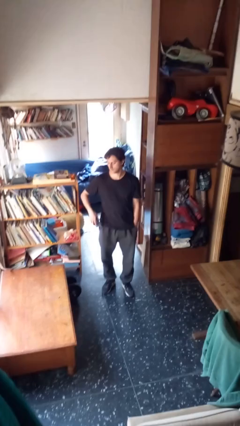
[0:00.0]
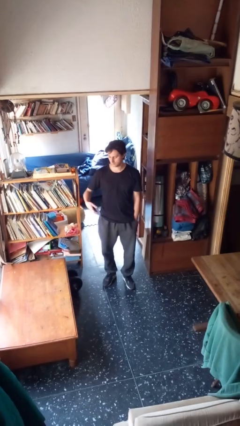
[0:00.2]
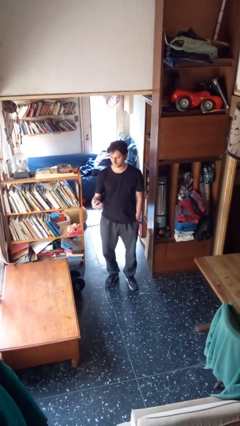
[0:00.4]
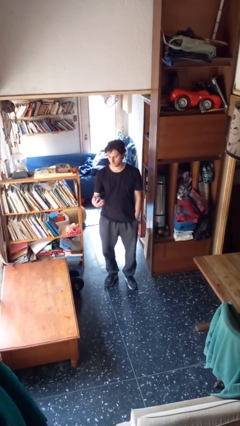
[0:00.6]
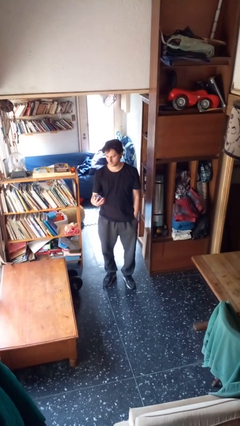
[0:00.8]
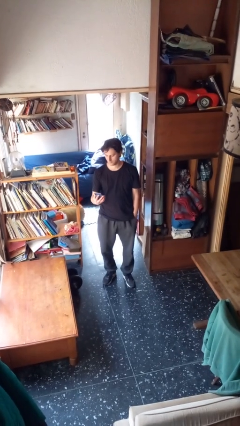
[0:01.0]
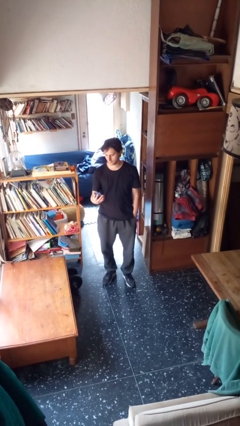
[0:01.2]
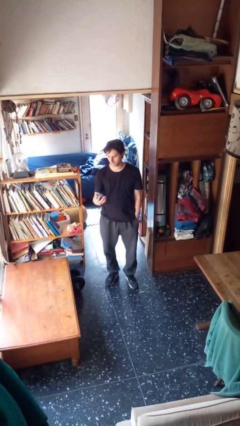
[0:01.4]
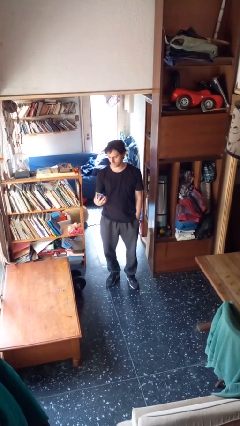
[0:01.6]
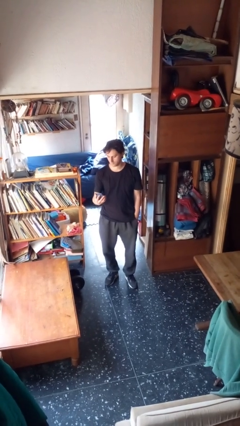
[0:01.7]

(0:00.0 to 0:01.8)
person takes phone from pocket

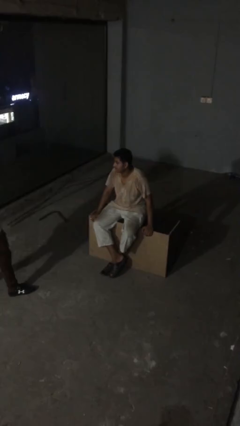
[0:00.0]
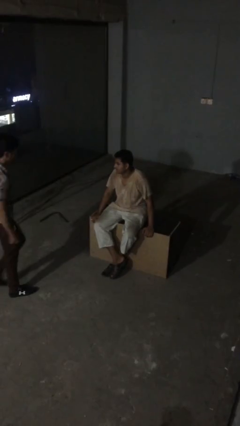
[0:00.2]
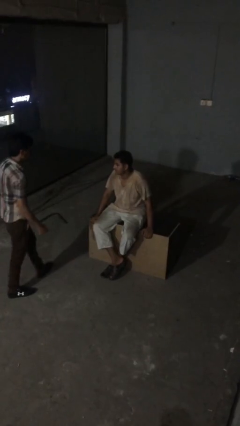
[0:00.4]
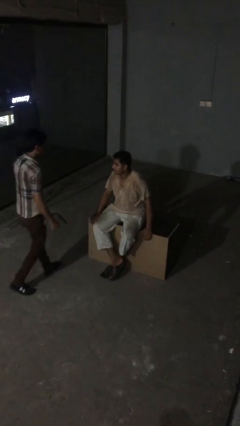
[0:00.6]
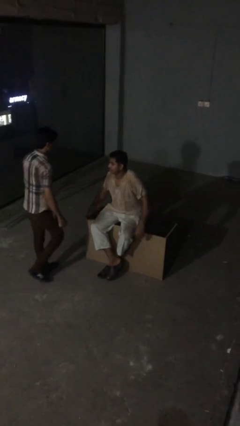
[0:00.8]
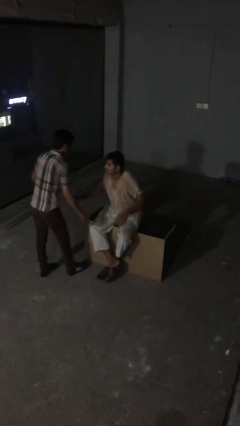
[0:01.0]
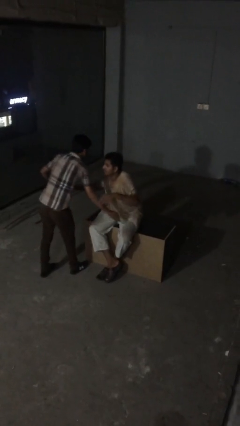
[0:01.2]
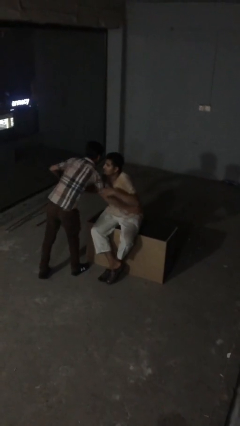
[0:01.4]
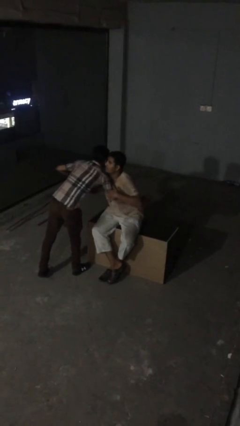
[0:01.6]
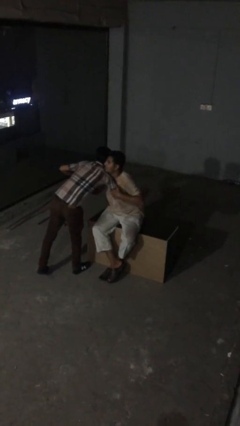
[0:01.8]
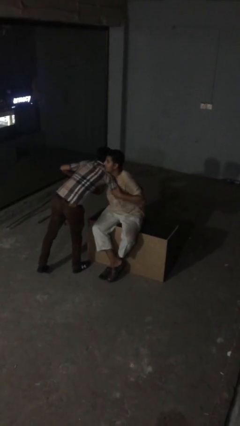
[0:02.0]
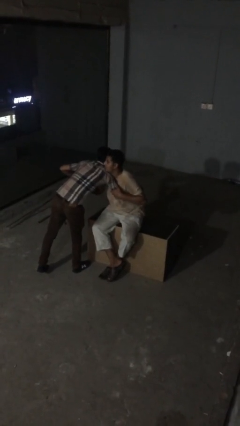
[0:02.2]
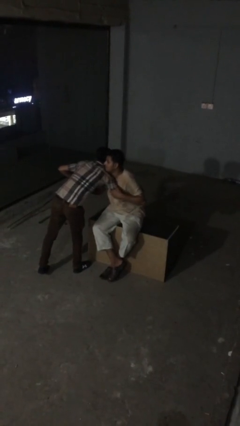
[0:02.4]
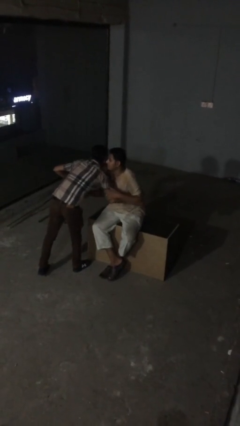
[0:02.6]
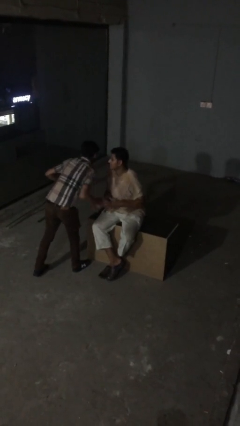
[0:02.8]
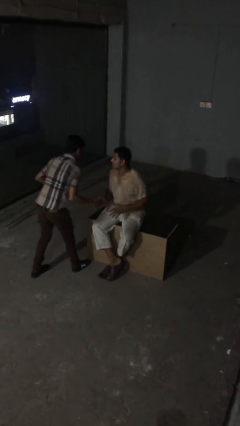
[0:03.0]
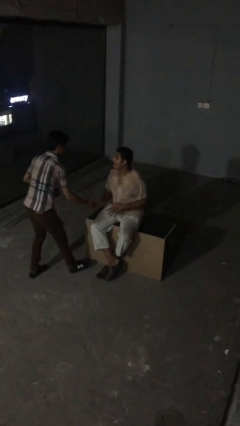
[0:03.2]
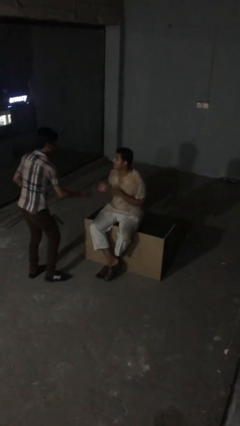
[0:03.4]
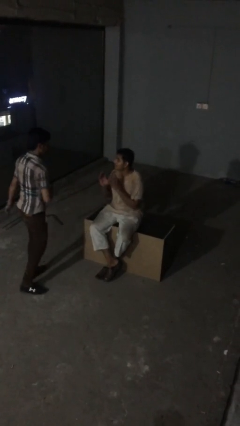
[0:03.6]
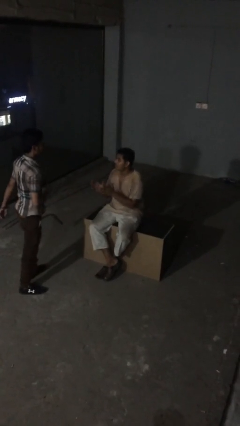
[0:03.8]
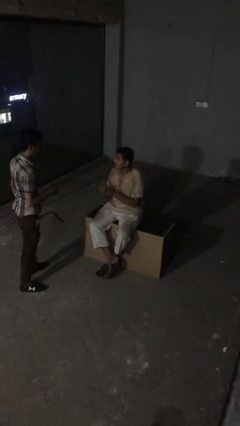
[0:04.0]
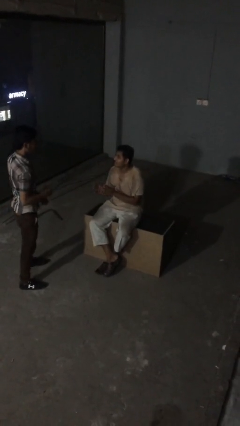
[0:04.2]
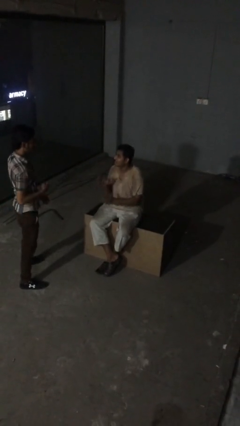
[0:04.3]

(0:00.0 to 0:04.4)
person embraces person

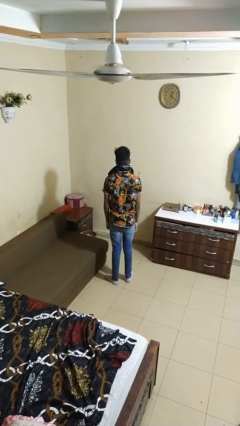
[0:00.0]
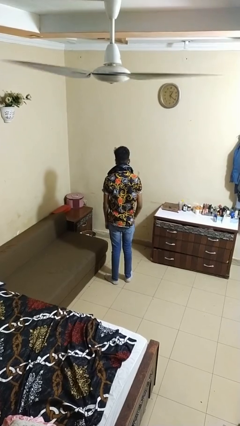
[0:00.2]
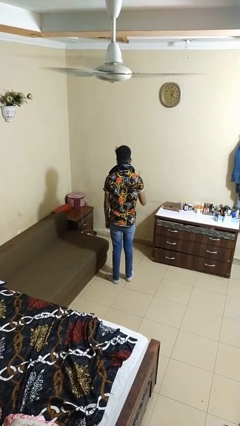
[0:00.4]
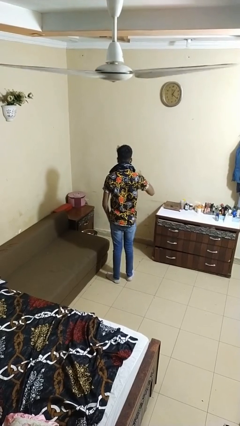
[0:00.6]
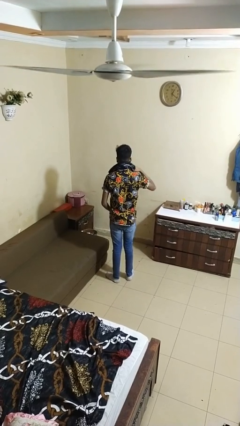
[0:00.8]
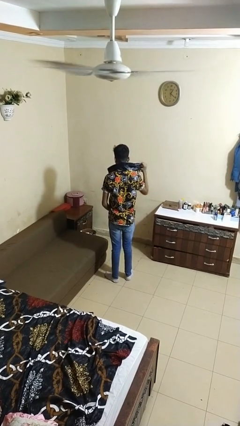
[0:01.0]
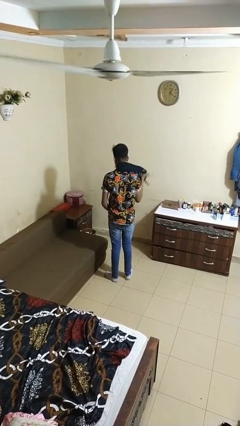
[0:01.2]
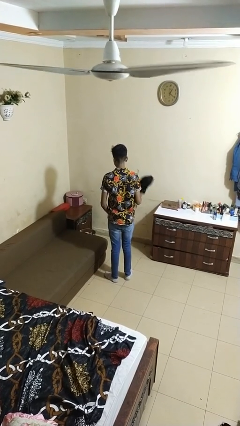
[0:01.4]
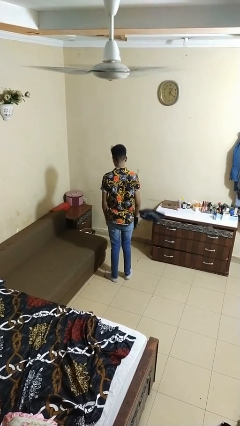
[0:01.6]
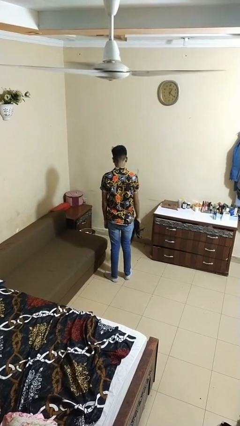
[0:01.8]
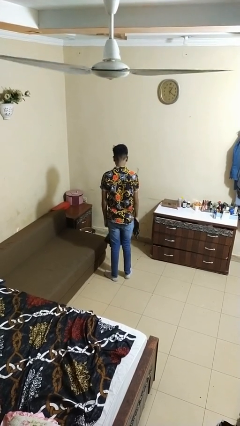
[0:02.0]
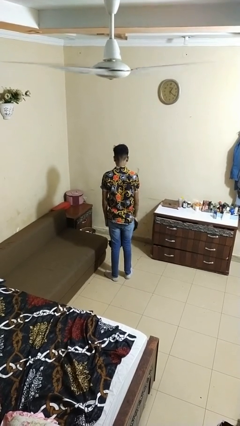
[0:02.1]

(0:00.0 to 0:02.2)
person takes off scarf

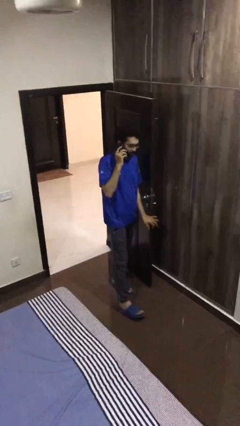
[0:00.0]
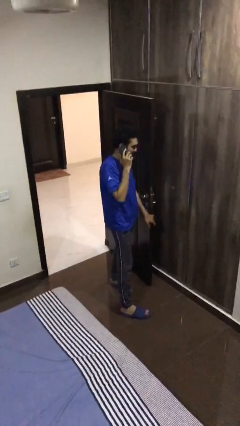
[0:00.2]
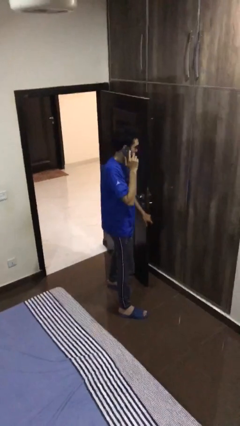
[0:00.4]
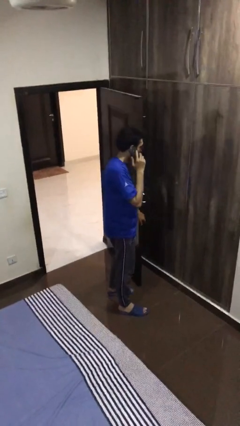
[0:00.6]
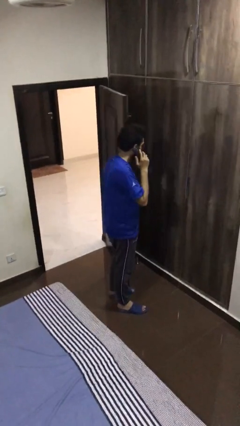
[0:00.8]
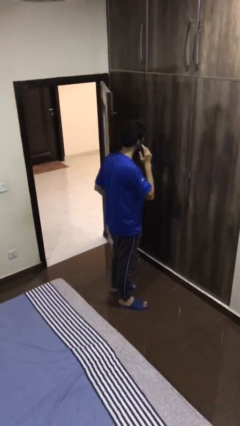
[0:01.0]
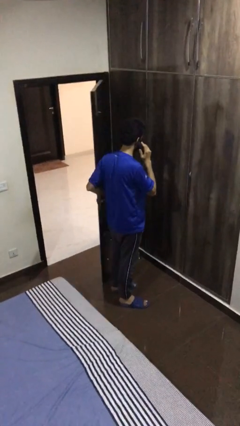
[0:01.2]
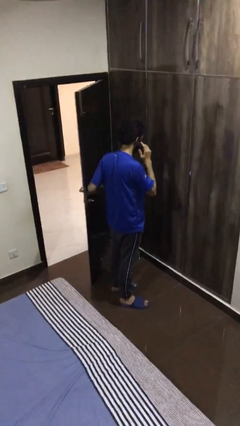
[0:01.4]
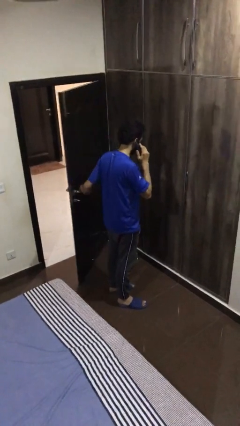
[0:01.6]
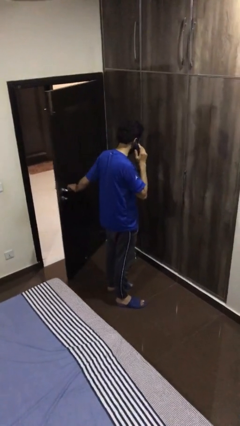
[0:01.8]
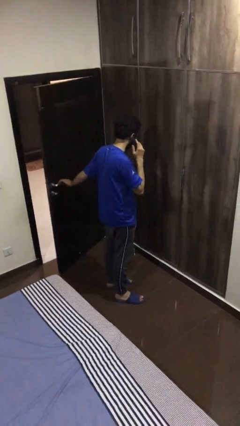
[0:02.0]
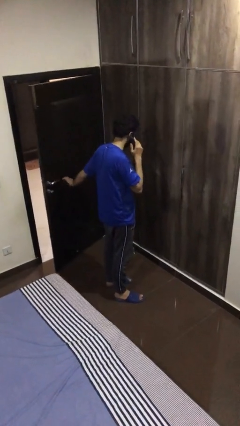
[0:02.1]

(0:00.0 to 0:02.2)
person closes facility door

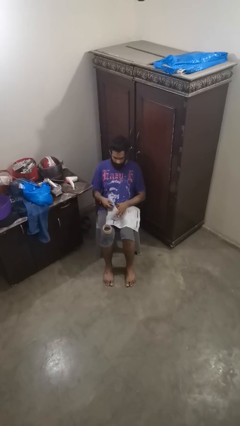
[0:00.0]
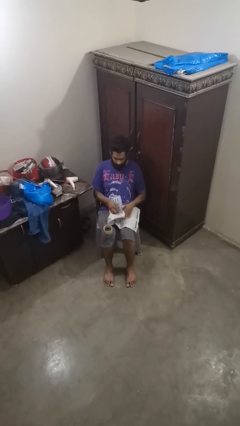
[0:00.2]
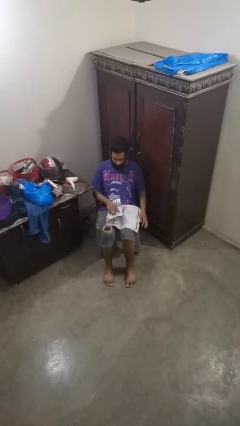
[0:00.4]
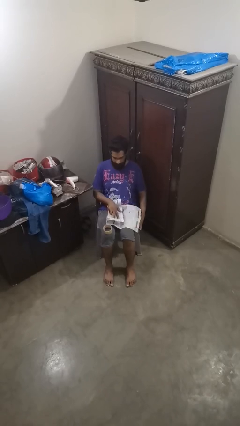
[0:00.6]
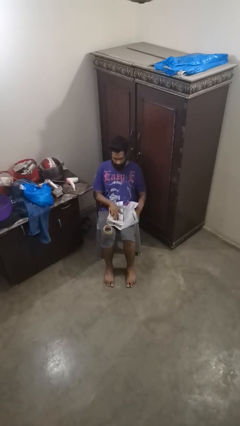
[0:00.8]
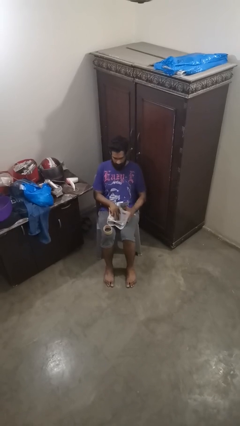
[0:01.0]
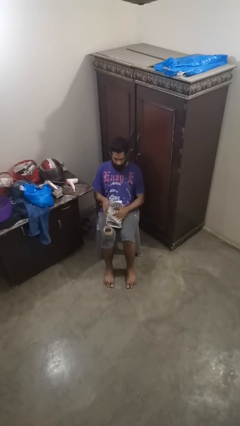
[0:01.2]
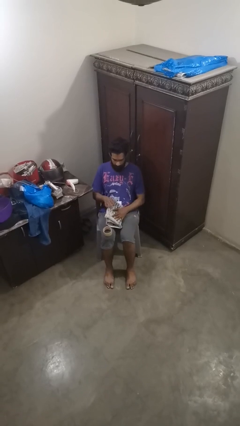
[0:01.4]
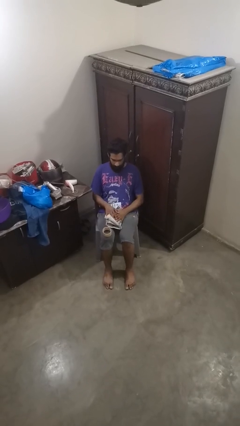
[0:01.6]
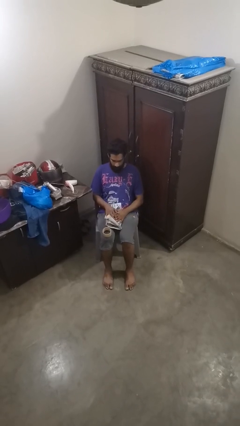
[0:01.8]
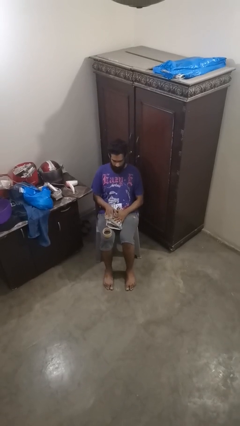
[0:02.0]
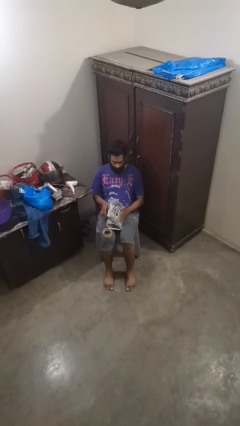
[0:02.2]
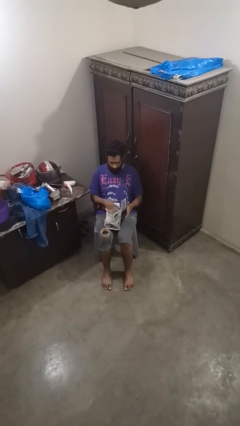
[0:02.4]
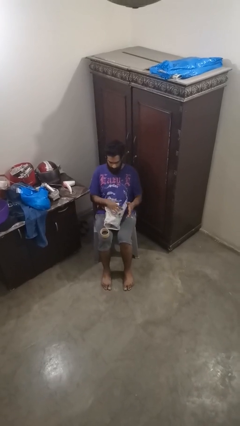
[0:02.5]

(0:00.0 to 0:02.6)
person wraps box

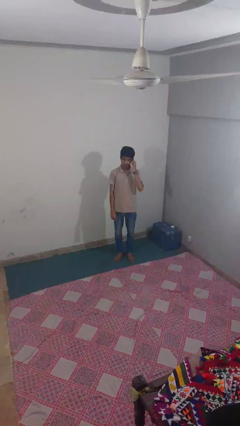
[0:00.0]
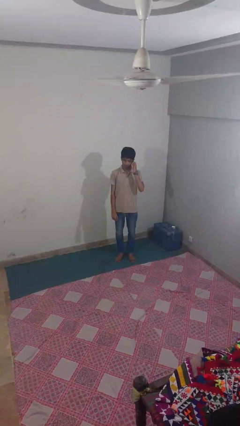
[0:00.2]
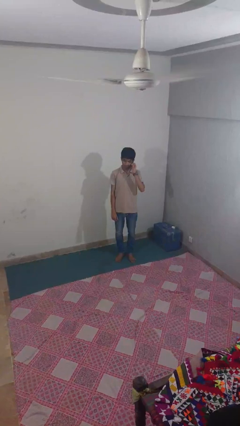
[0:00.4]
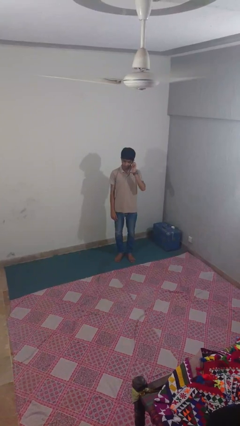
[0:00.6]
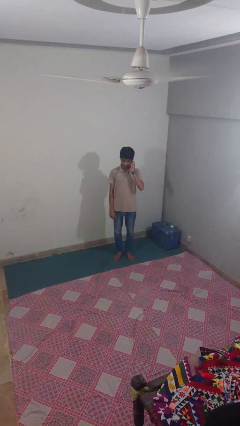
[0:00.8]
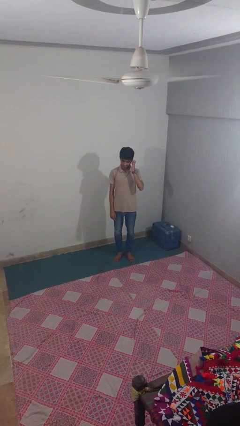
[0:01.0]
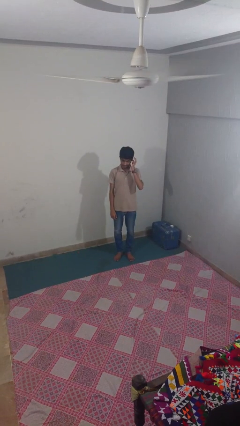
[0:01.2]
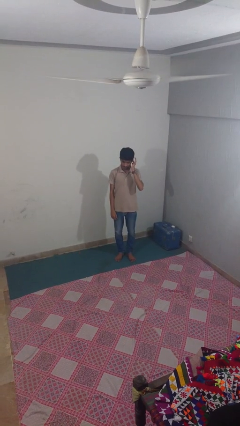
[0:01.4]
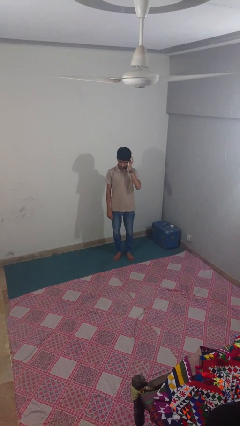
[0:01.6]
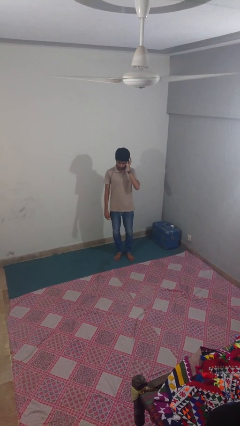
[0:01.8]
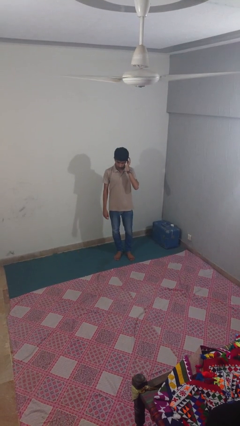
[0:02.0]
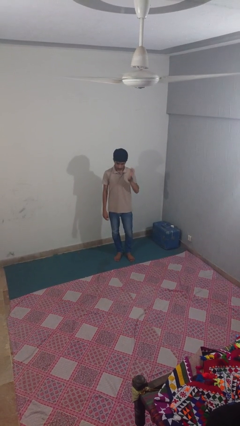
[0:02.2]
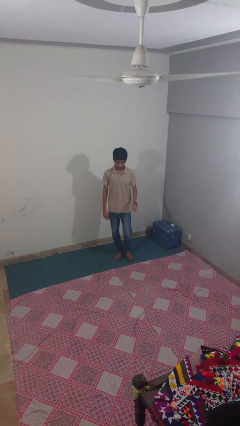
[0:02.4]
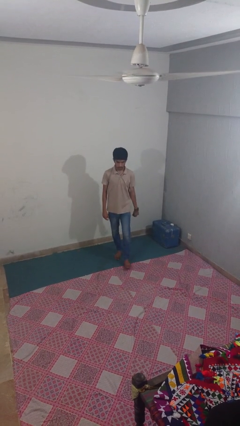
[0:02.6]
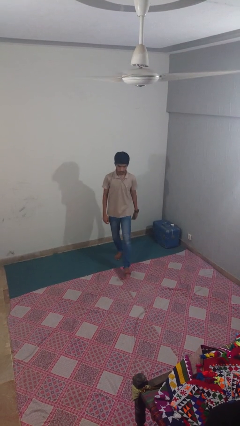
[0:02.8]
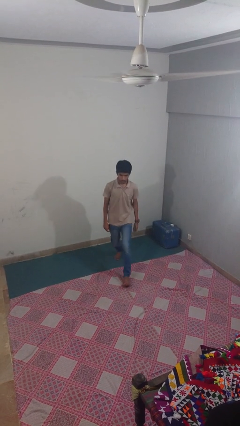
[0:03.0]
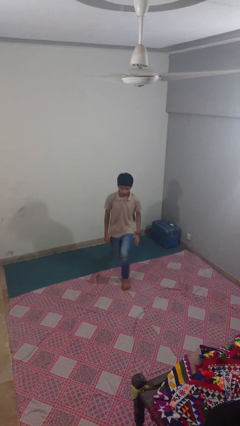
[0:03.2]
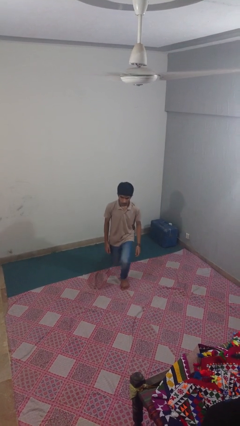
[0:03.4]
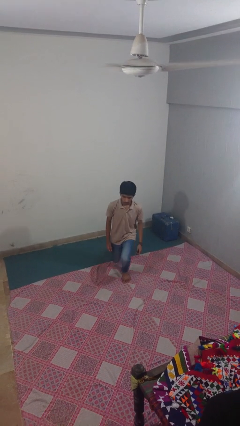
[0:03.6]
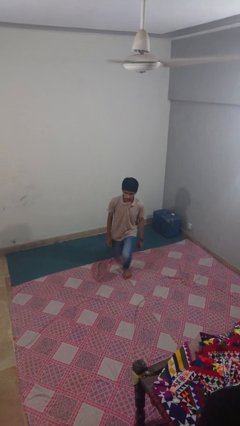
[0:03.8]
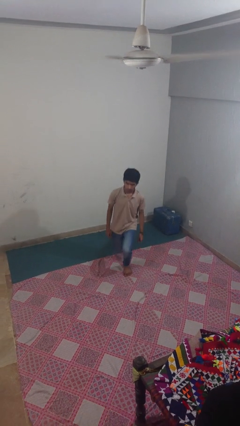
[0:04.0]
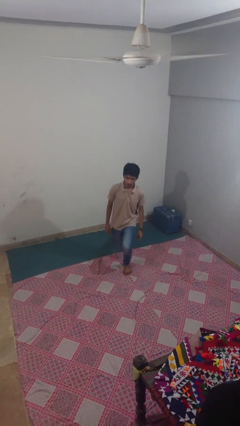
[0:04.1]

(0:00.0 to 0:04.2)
person exercises with lunges

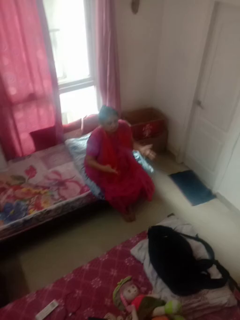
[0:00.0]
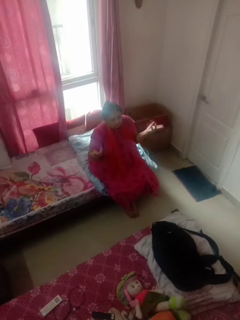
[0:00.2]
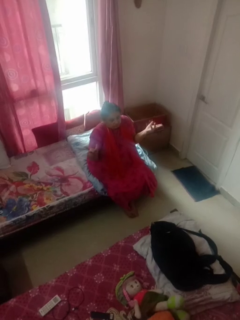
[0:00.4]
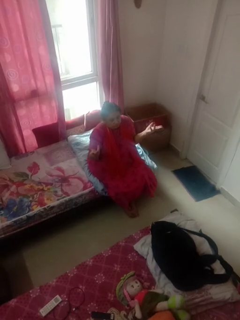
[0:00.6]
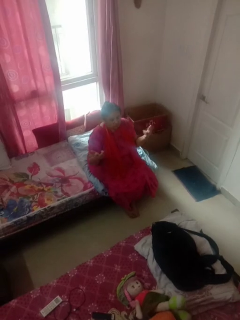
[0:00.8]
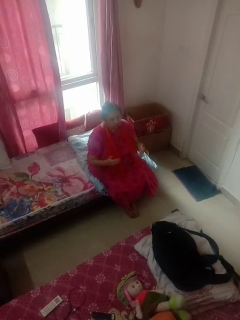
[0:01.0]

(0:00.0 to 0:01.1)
person shrugs
